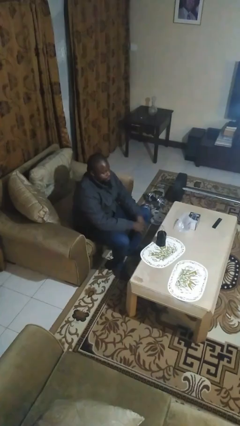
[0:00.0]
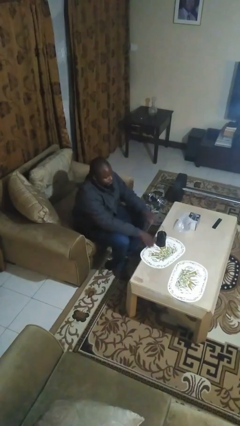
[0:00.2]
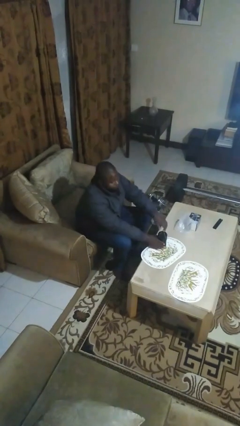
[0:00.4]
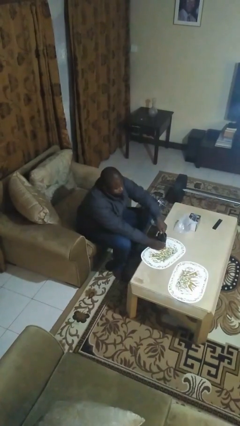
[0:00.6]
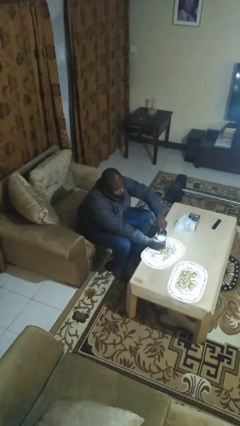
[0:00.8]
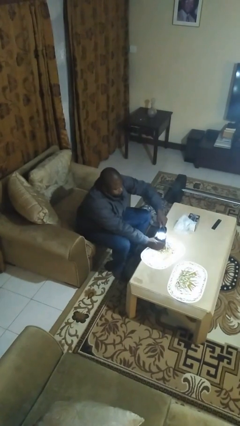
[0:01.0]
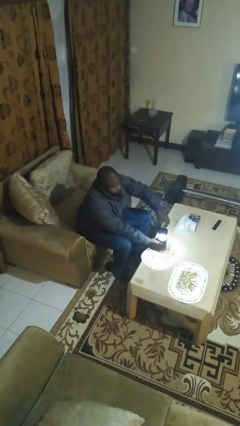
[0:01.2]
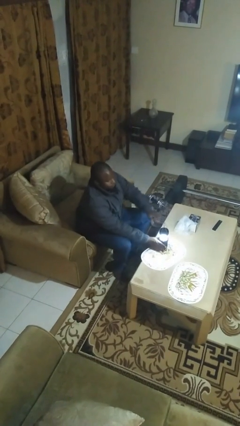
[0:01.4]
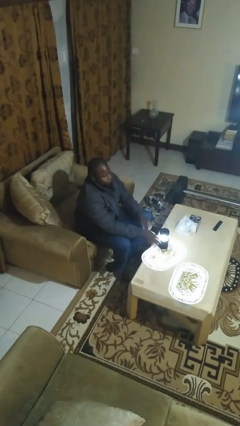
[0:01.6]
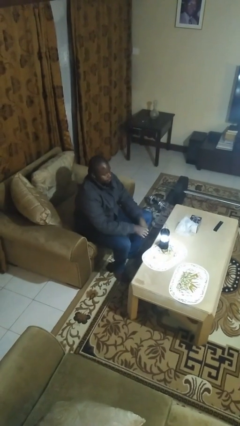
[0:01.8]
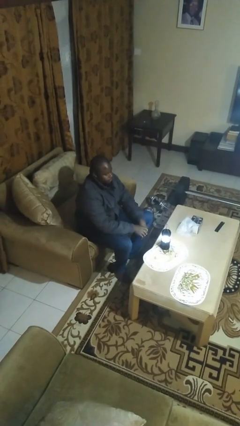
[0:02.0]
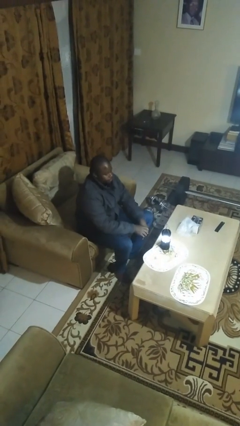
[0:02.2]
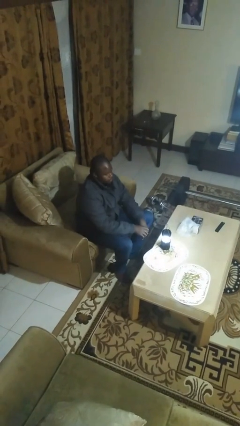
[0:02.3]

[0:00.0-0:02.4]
person turns on lamp

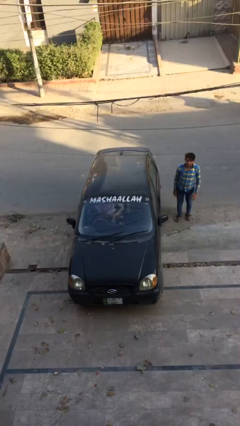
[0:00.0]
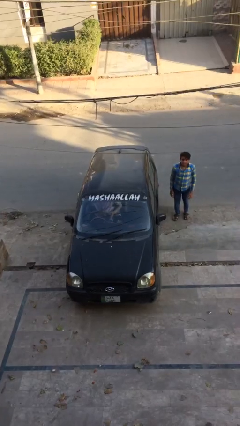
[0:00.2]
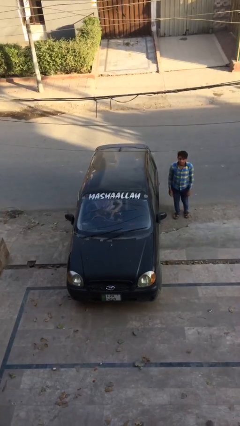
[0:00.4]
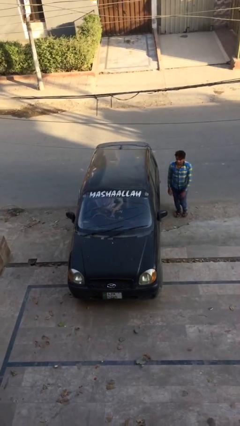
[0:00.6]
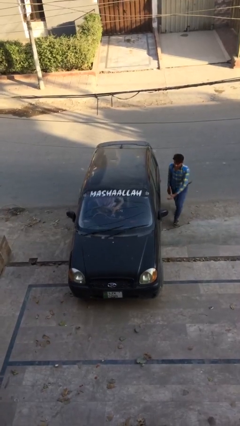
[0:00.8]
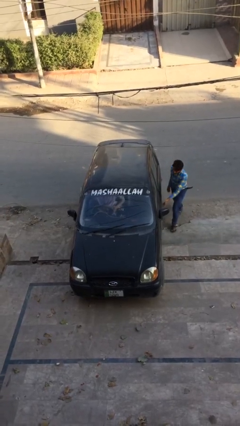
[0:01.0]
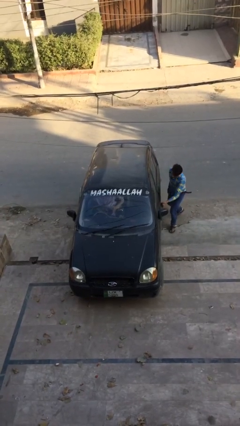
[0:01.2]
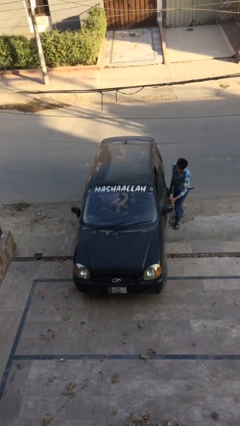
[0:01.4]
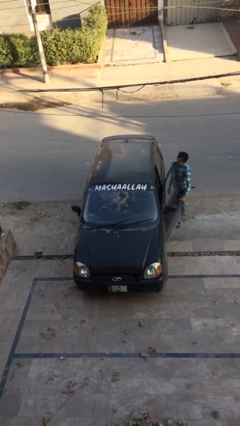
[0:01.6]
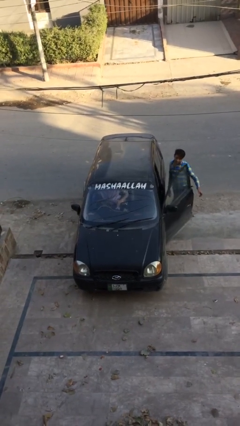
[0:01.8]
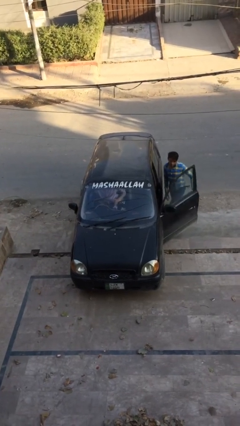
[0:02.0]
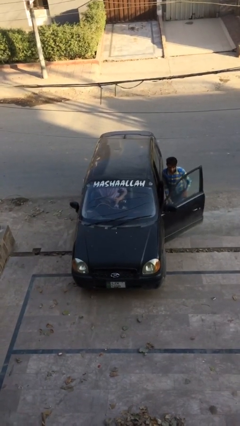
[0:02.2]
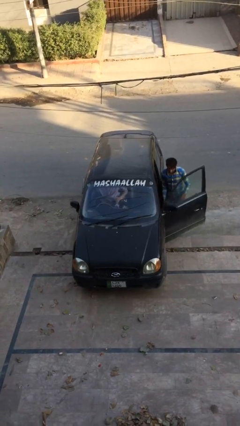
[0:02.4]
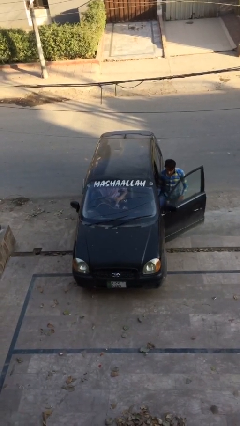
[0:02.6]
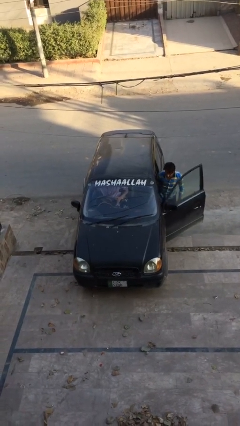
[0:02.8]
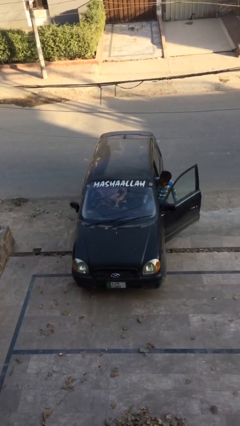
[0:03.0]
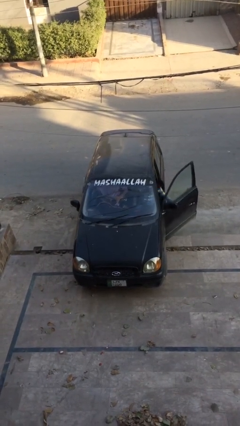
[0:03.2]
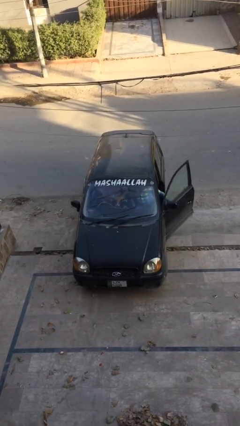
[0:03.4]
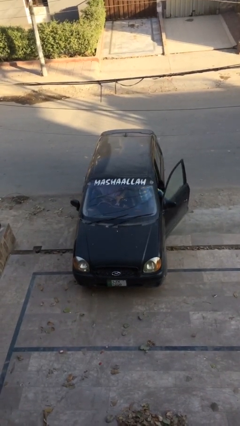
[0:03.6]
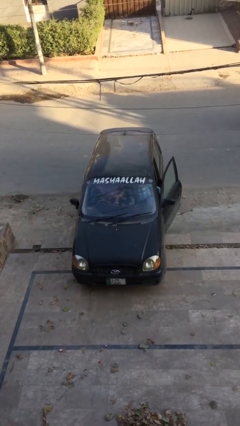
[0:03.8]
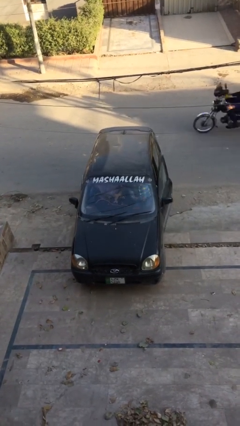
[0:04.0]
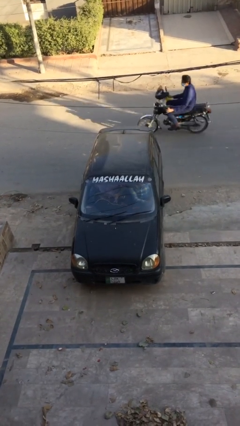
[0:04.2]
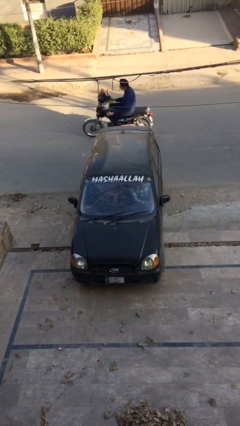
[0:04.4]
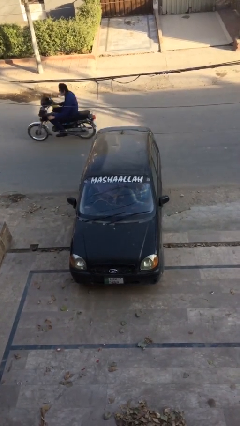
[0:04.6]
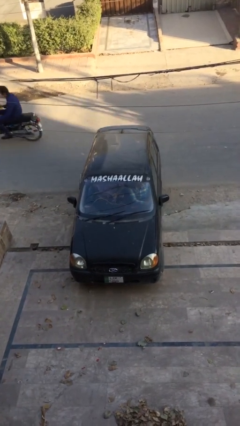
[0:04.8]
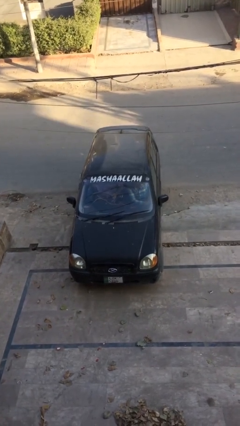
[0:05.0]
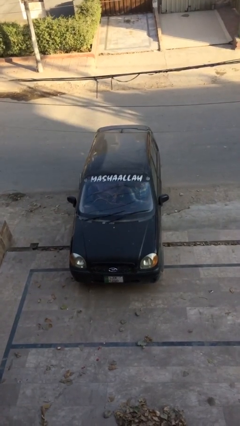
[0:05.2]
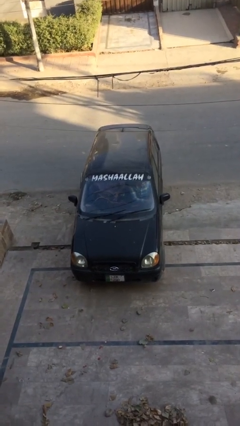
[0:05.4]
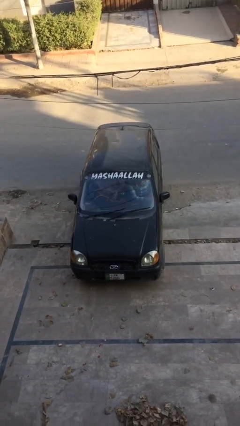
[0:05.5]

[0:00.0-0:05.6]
car picks up person

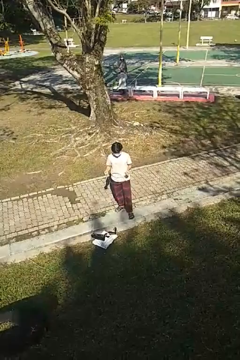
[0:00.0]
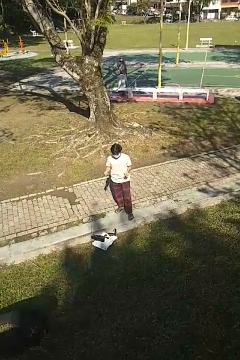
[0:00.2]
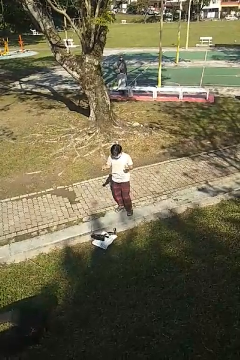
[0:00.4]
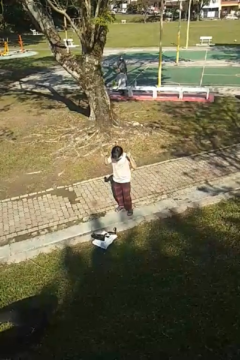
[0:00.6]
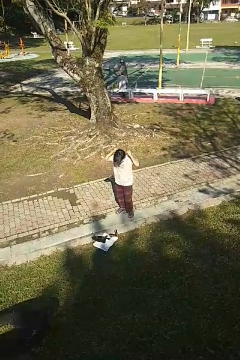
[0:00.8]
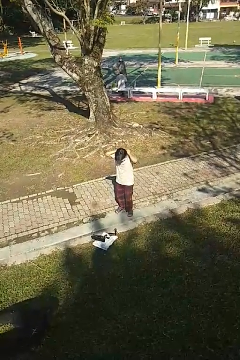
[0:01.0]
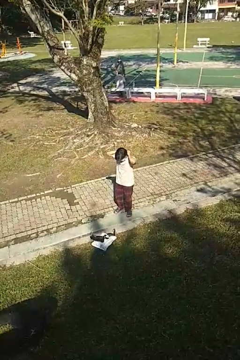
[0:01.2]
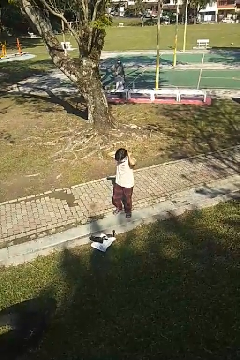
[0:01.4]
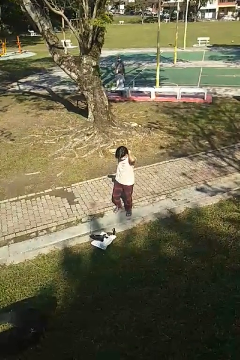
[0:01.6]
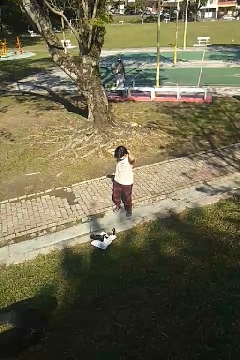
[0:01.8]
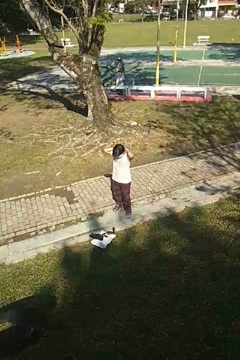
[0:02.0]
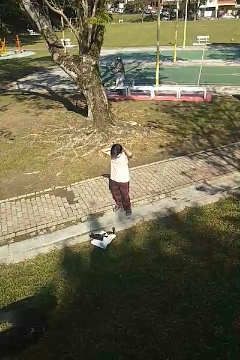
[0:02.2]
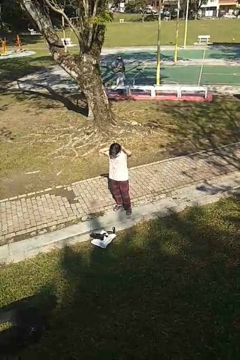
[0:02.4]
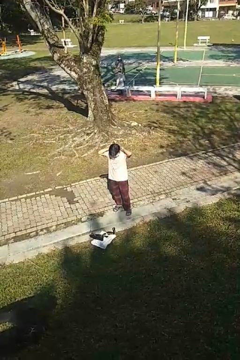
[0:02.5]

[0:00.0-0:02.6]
person puts on necklace

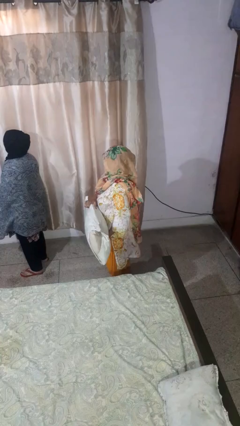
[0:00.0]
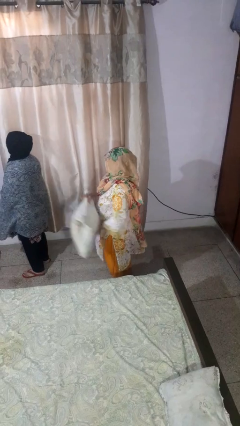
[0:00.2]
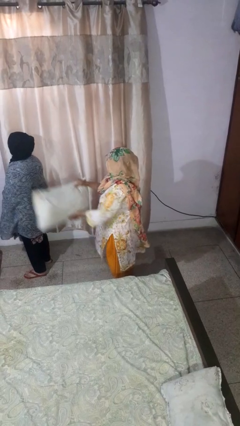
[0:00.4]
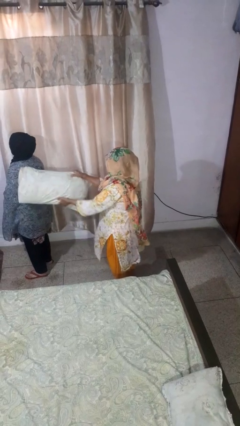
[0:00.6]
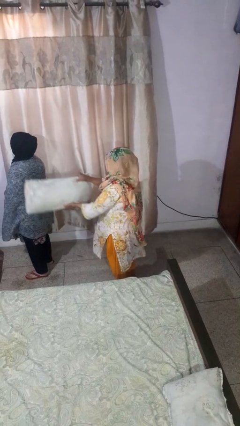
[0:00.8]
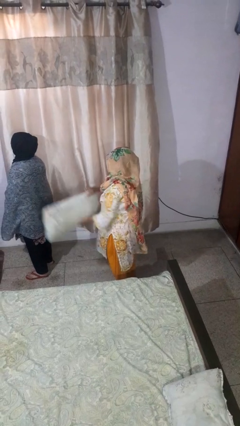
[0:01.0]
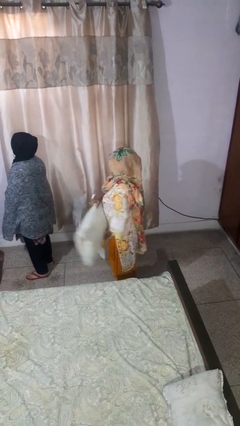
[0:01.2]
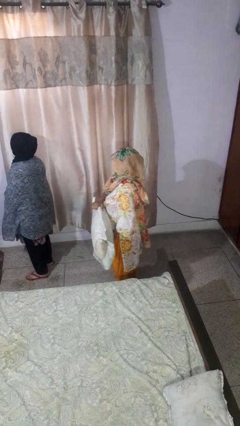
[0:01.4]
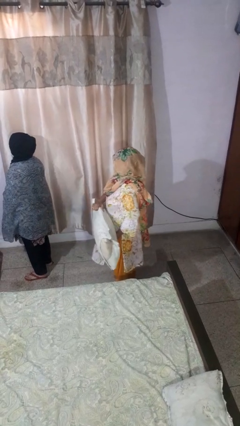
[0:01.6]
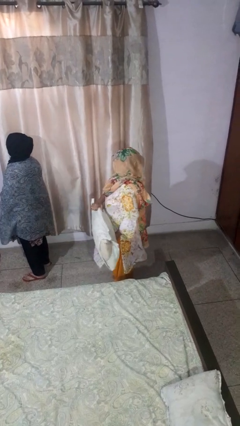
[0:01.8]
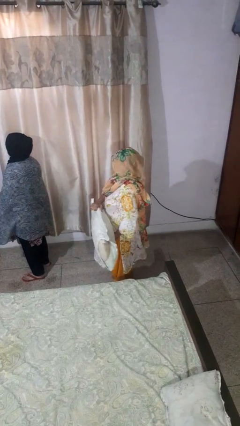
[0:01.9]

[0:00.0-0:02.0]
person hits person with pillow

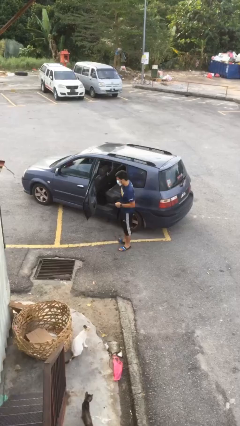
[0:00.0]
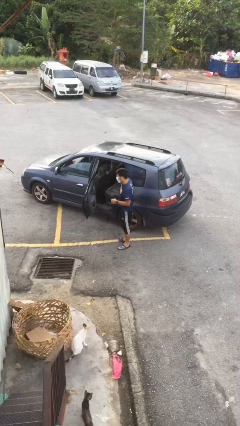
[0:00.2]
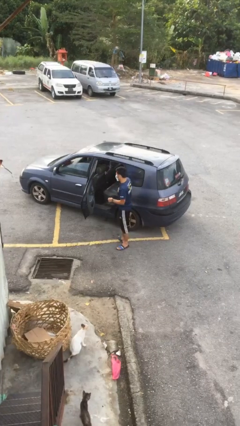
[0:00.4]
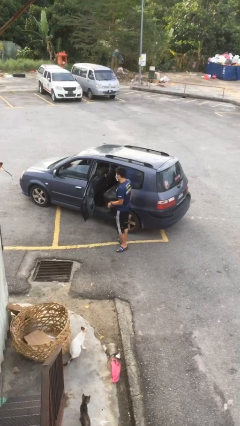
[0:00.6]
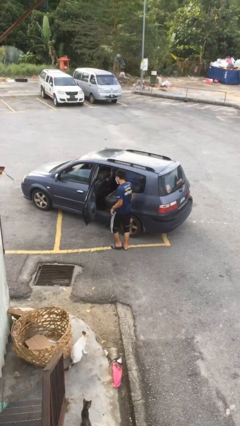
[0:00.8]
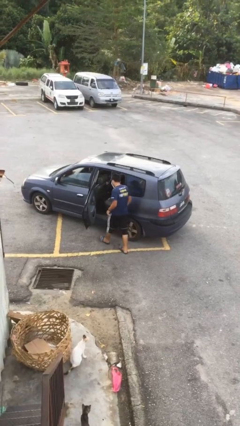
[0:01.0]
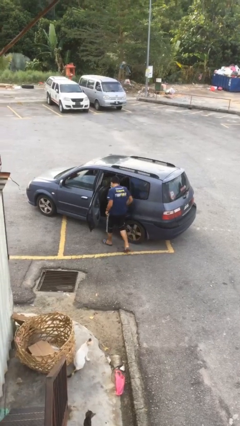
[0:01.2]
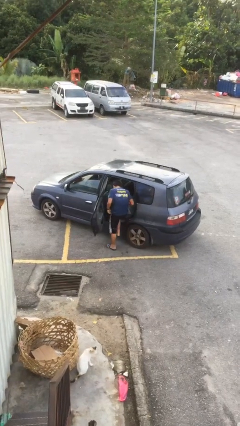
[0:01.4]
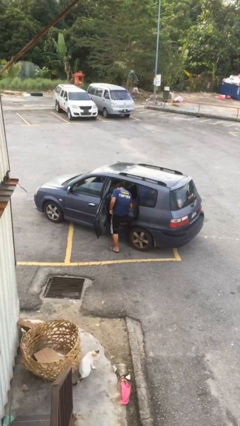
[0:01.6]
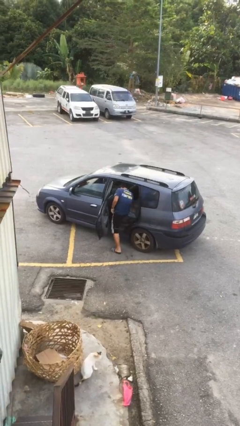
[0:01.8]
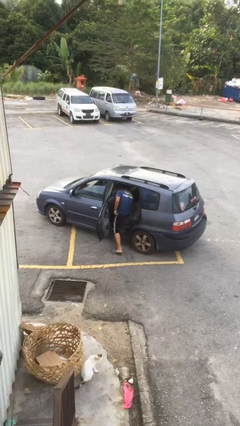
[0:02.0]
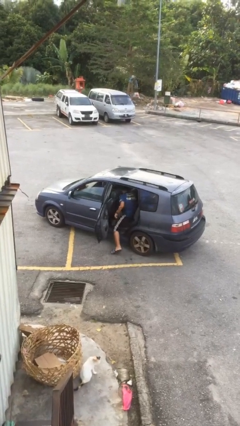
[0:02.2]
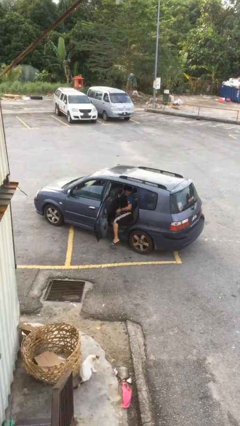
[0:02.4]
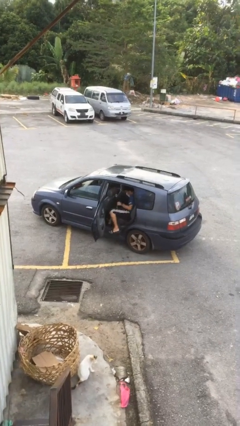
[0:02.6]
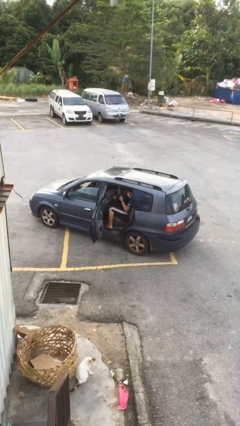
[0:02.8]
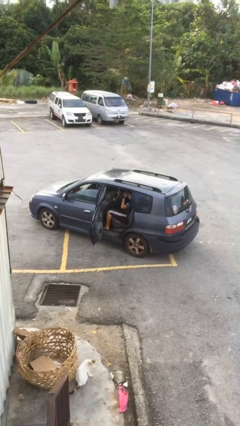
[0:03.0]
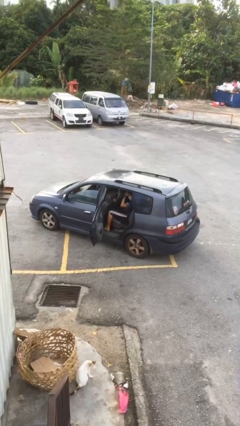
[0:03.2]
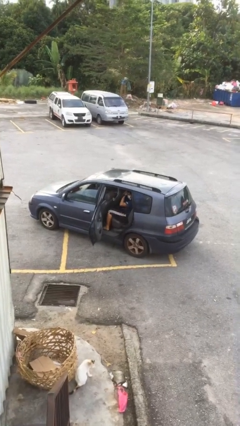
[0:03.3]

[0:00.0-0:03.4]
person enters car

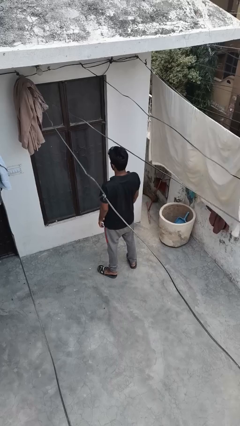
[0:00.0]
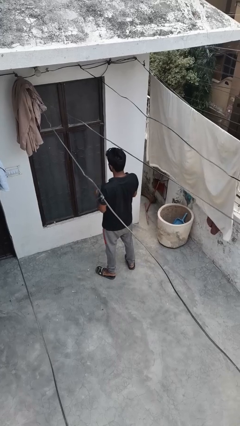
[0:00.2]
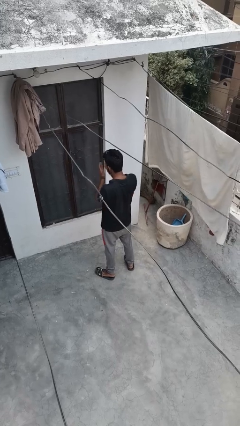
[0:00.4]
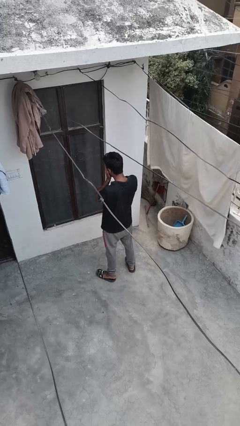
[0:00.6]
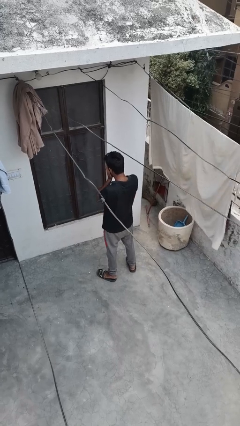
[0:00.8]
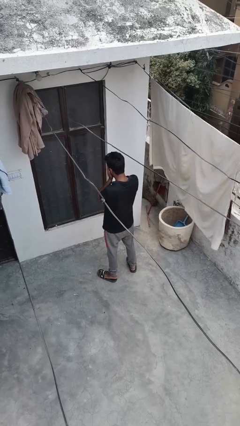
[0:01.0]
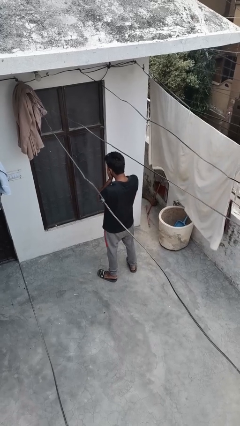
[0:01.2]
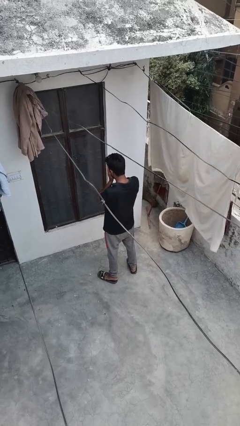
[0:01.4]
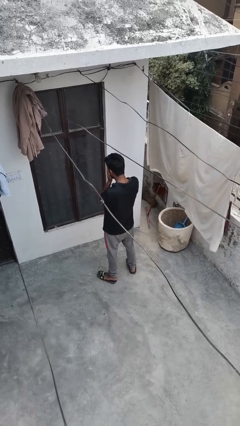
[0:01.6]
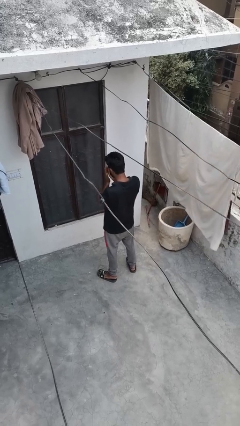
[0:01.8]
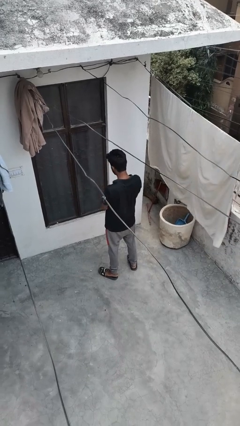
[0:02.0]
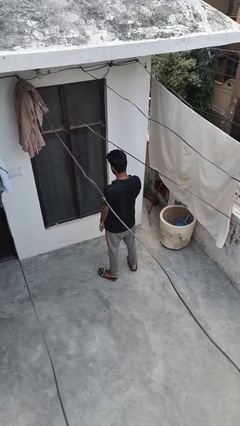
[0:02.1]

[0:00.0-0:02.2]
person covers face with hands
